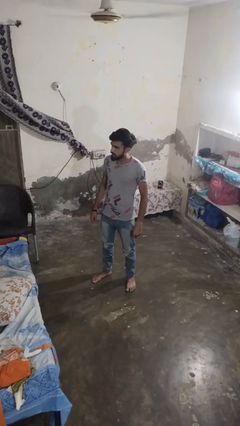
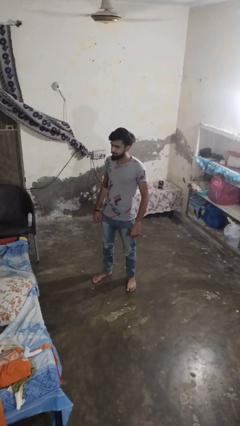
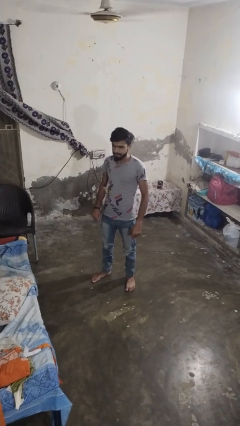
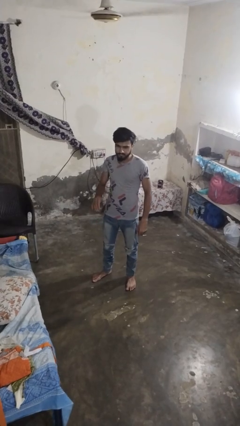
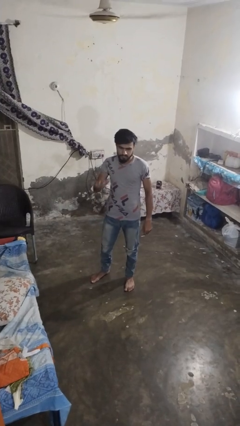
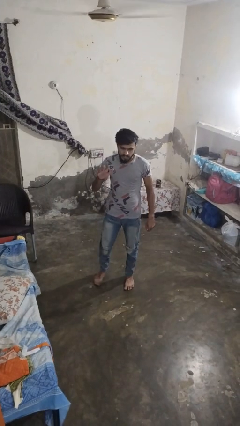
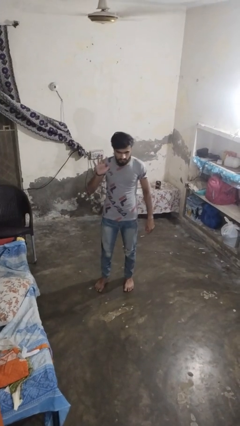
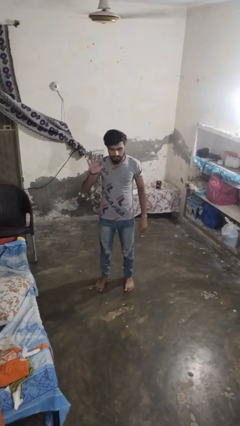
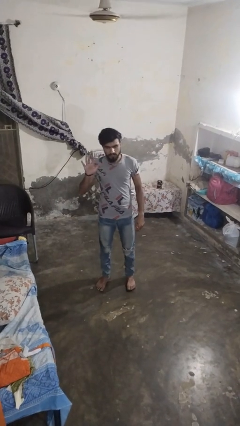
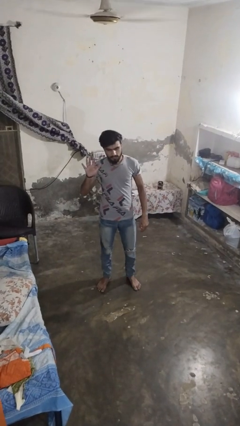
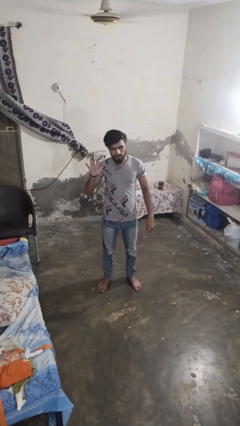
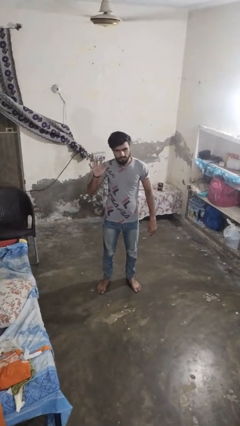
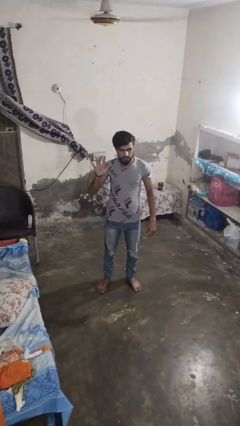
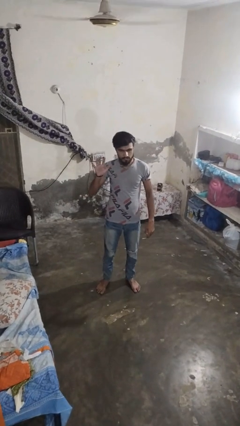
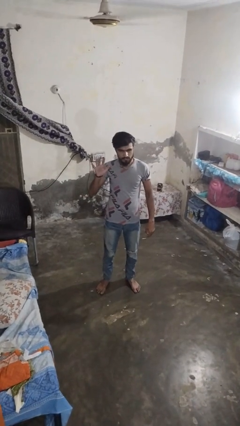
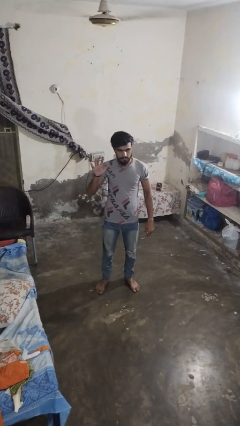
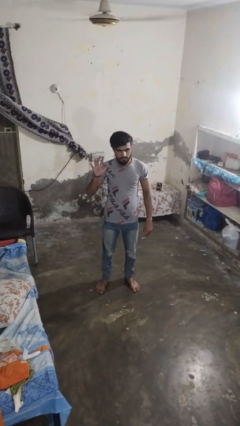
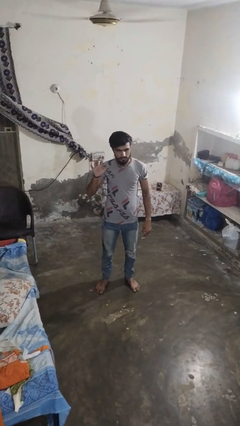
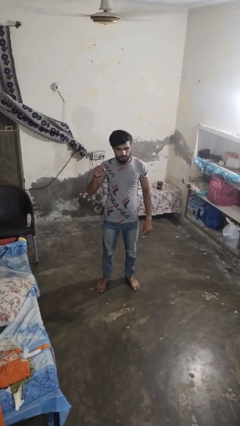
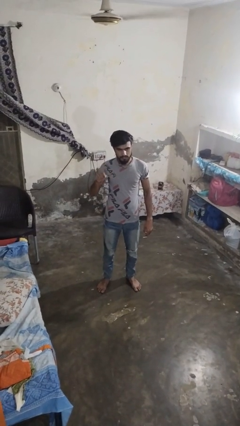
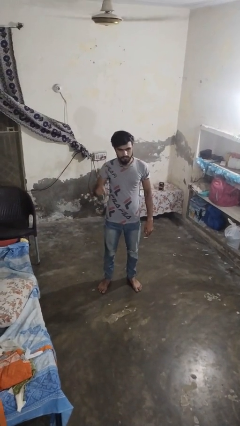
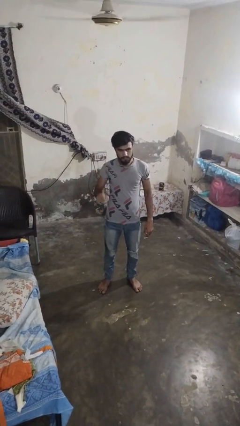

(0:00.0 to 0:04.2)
person gestures number five

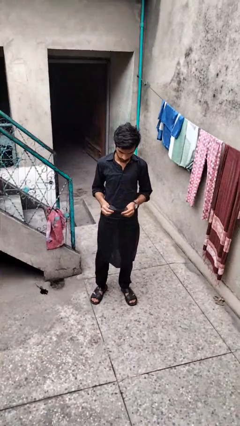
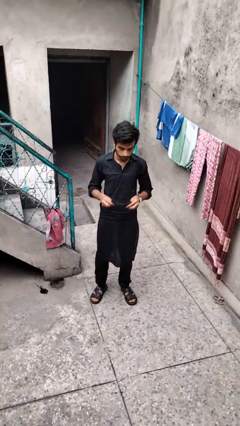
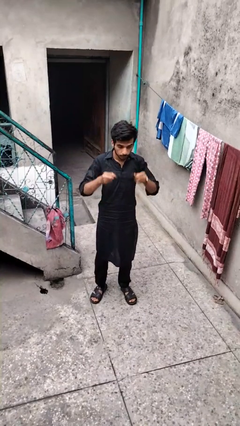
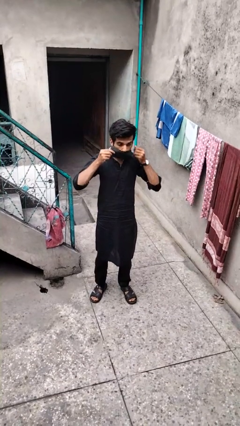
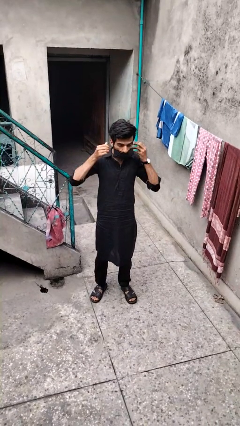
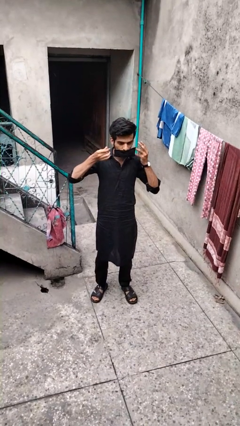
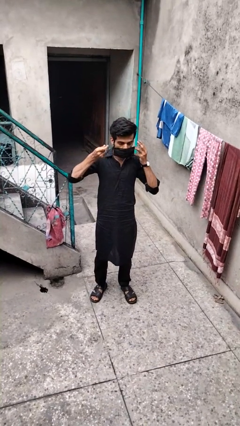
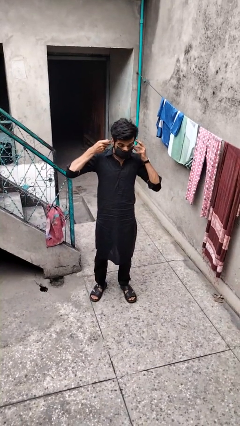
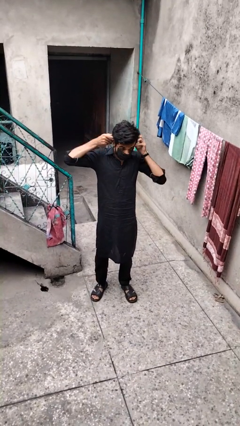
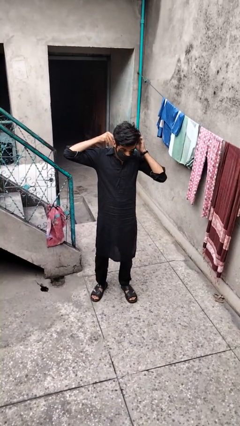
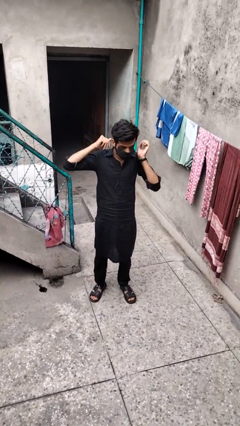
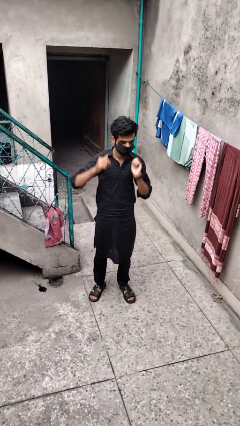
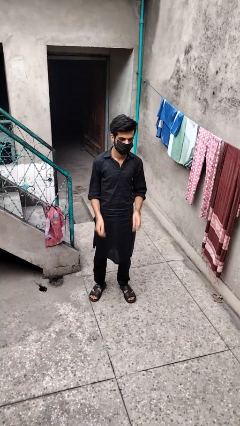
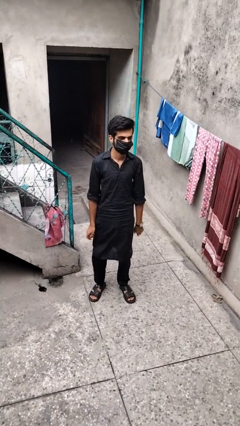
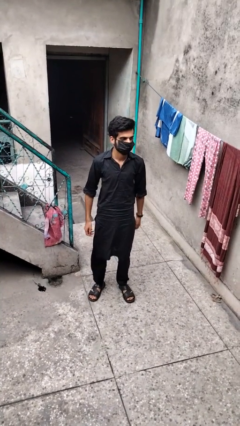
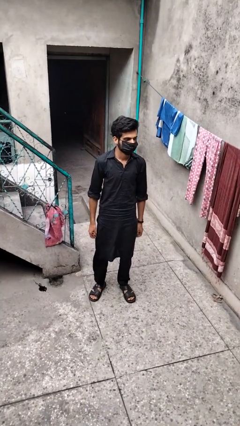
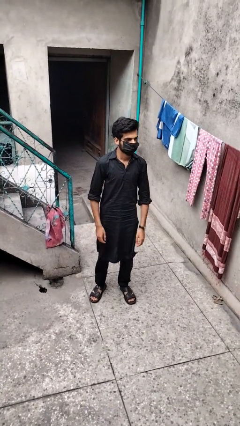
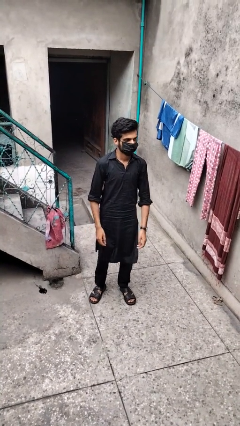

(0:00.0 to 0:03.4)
person puts on facemask

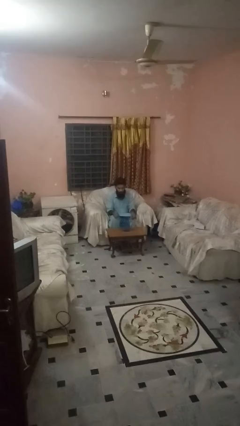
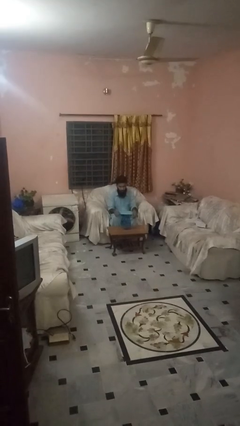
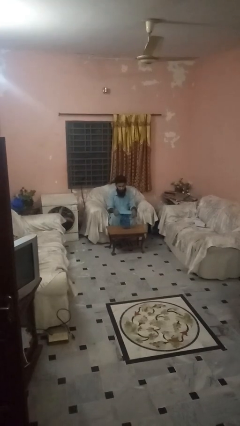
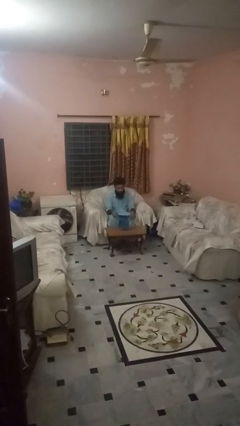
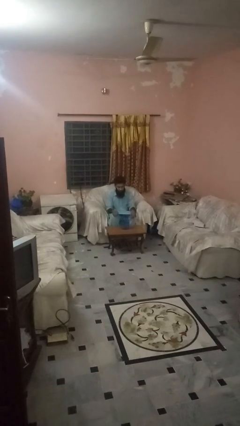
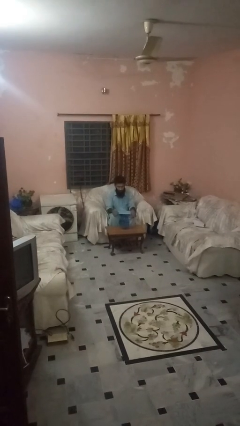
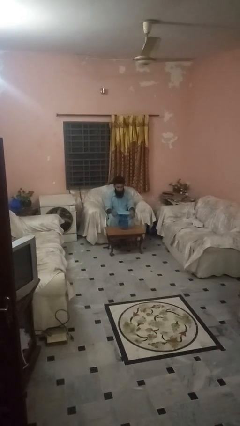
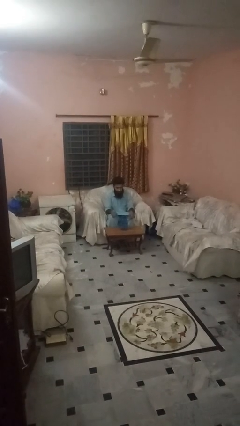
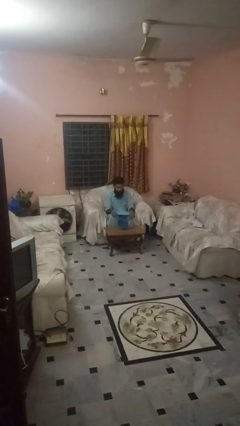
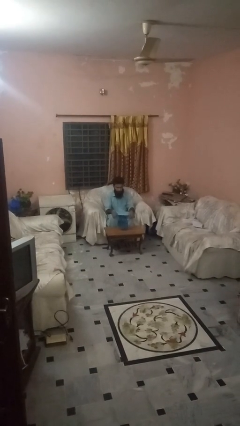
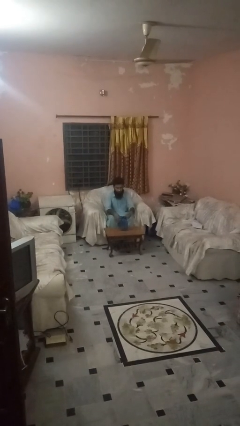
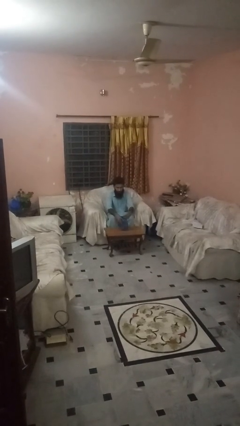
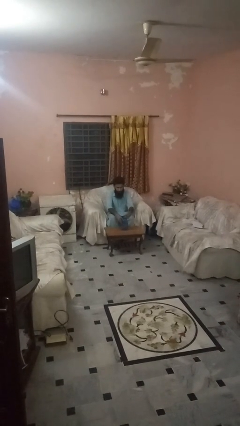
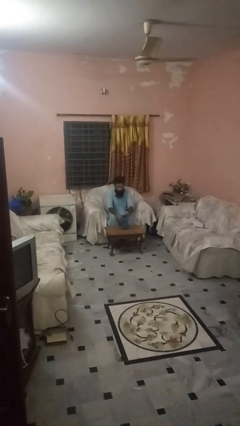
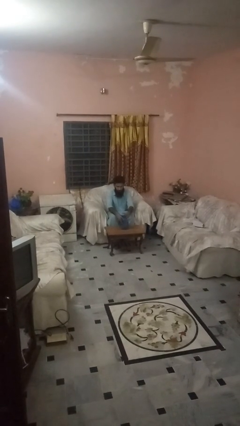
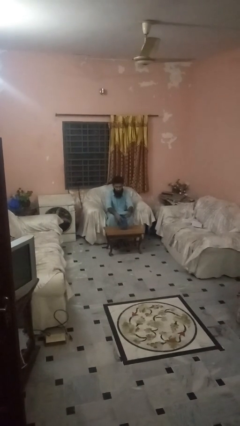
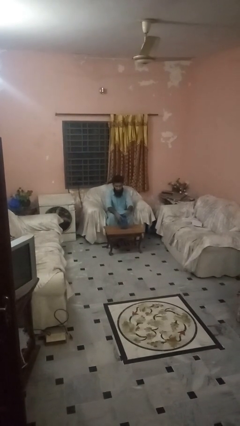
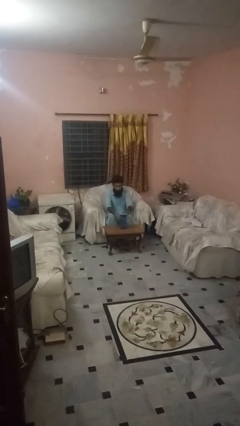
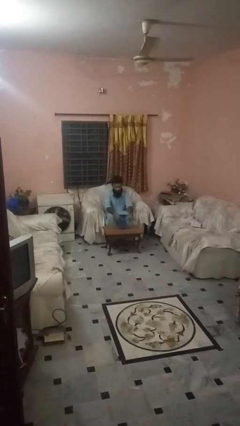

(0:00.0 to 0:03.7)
person unscrews lid from bottle

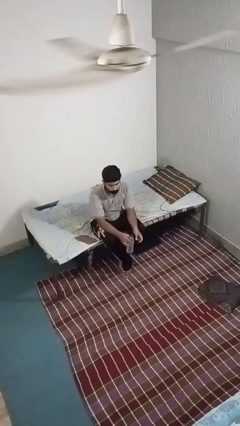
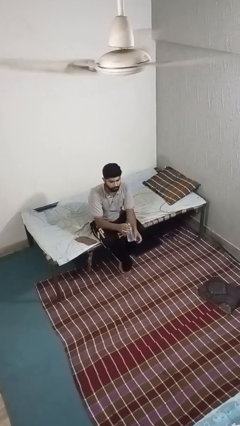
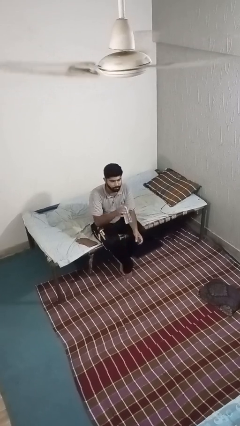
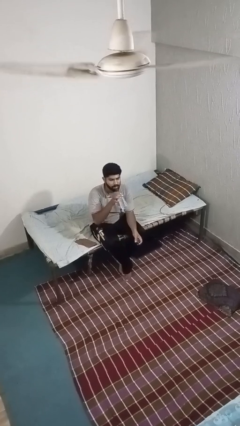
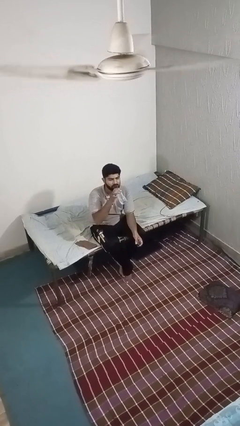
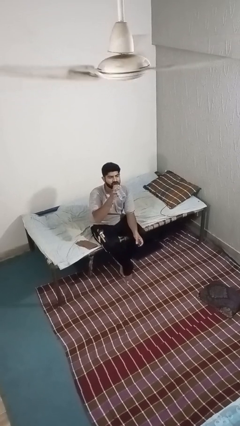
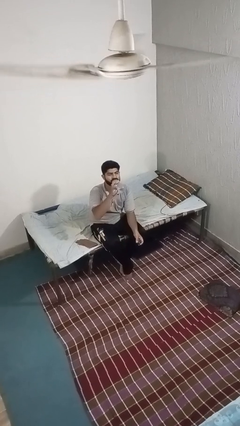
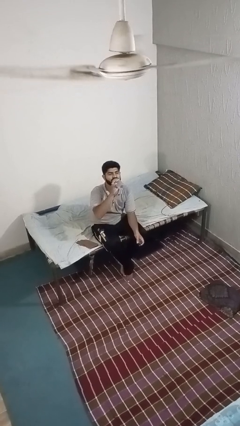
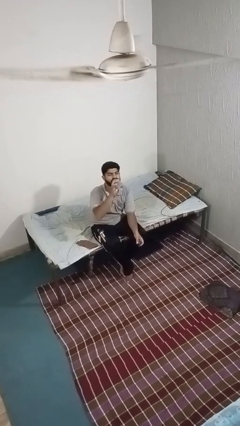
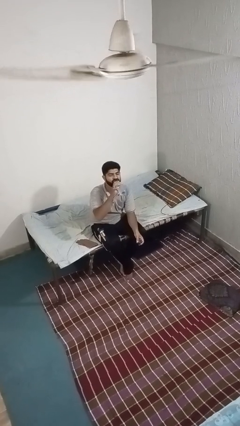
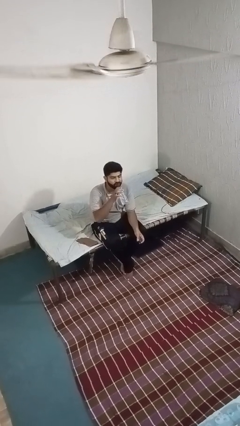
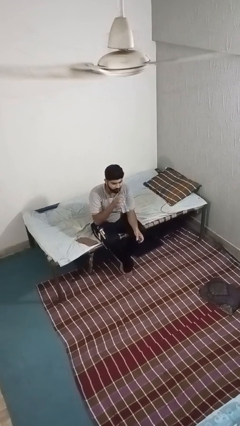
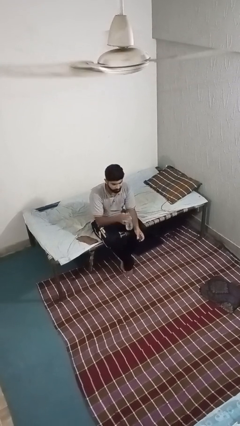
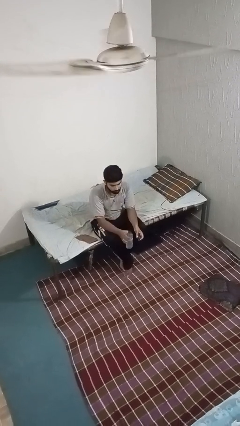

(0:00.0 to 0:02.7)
person drinks from bottle

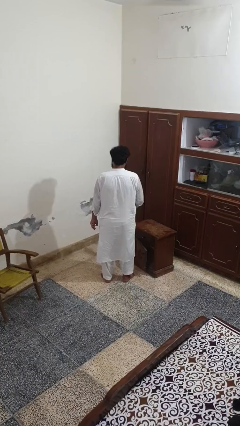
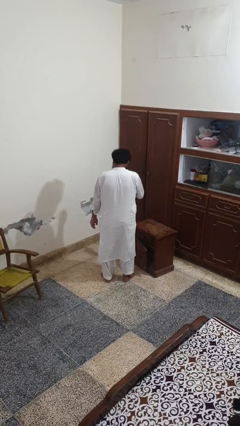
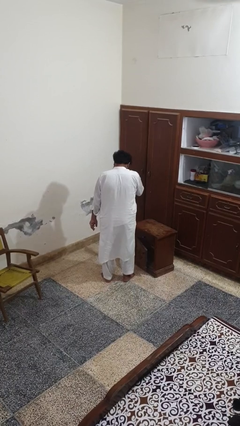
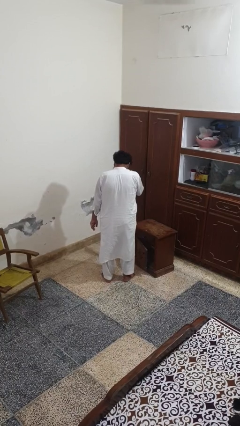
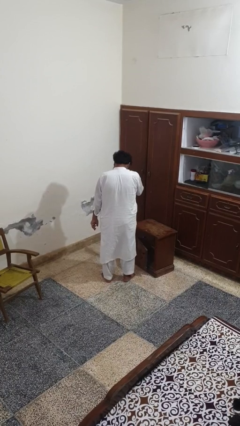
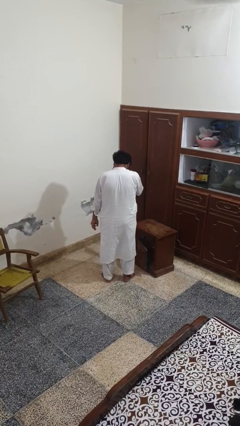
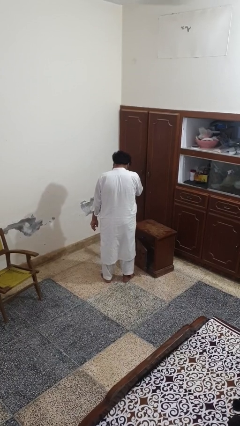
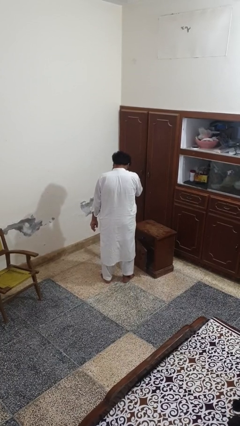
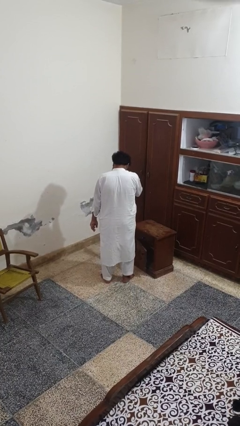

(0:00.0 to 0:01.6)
person sneezes into hand

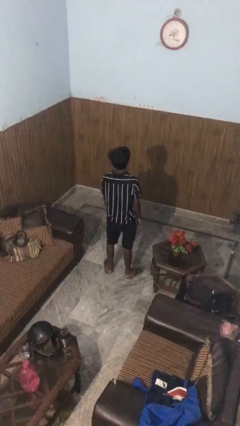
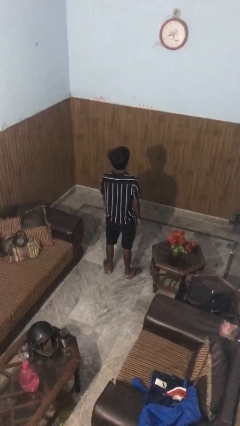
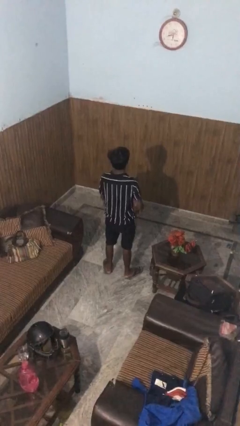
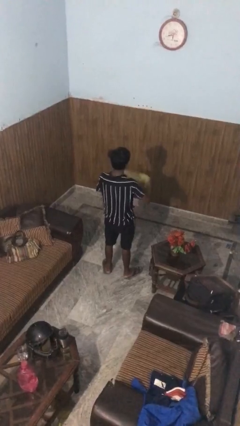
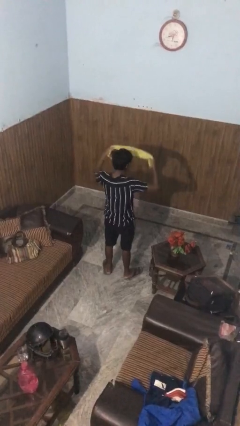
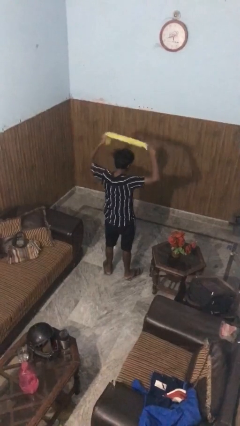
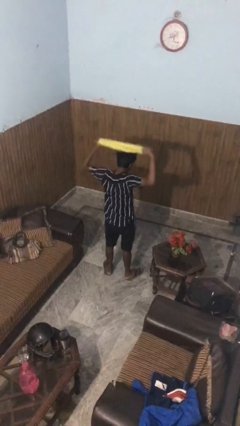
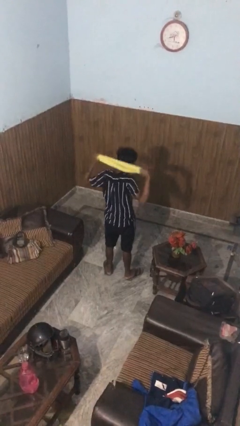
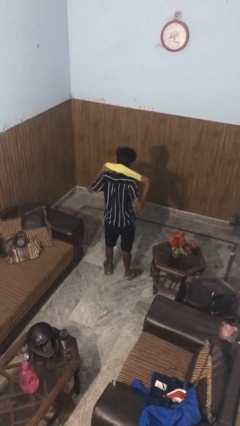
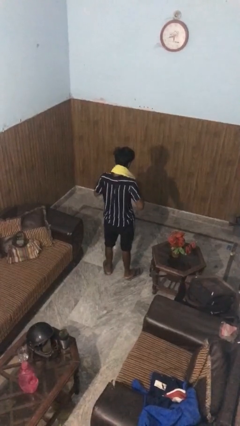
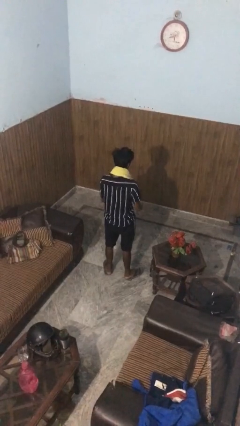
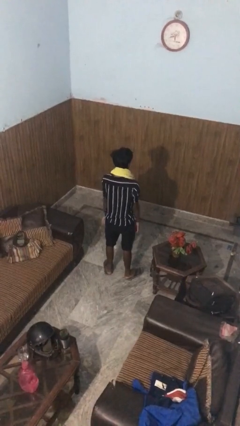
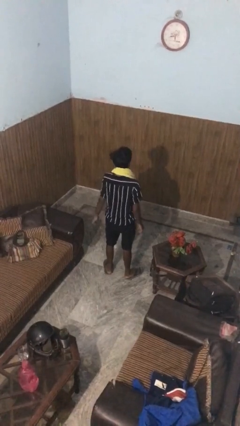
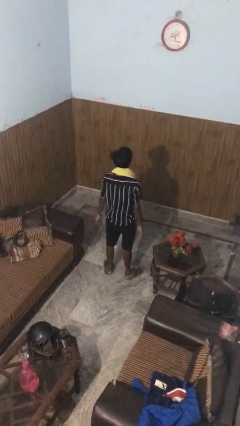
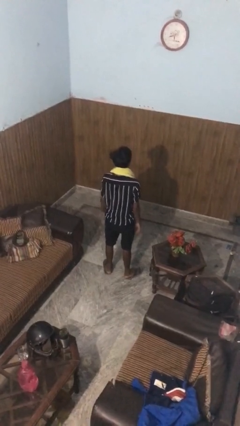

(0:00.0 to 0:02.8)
person puts on scarf
